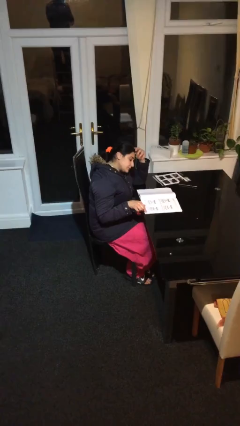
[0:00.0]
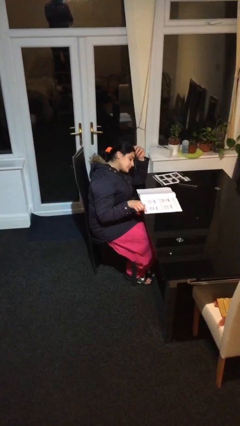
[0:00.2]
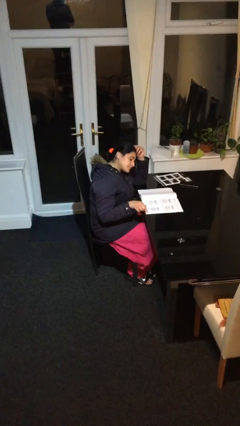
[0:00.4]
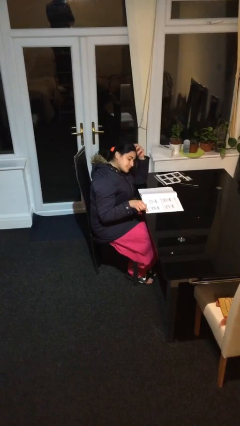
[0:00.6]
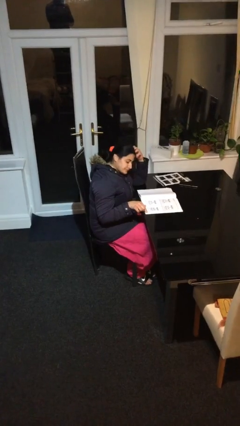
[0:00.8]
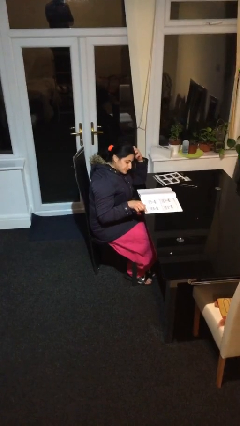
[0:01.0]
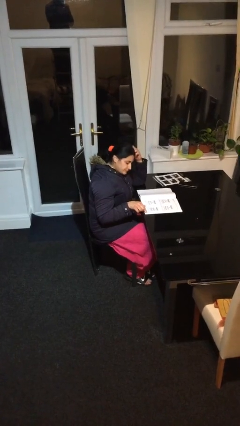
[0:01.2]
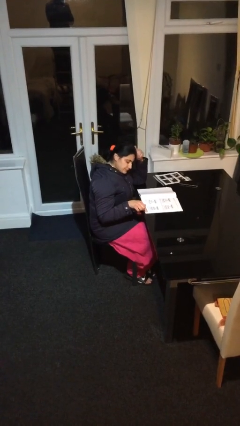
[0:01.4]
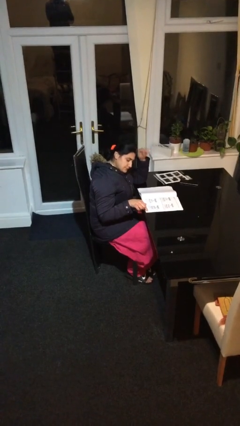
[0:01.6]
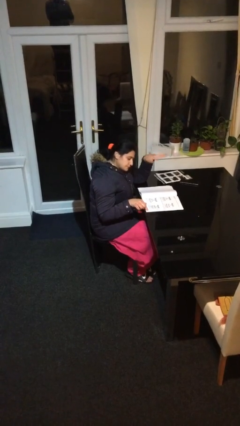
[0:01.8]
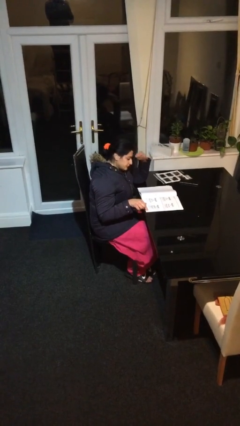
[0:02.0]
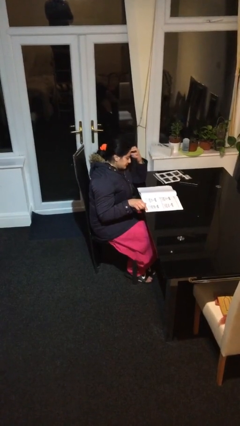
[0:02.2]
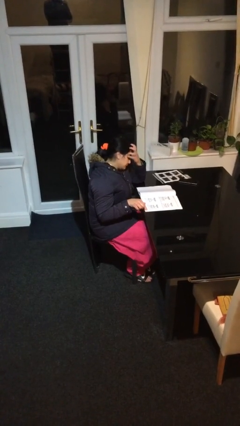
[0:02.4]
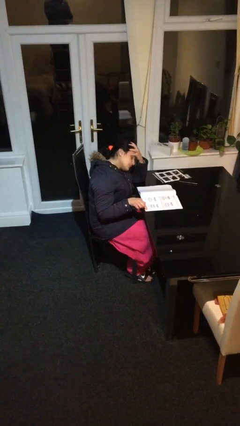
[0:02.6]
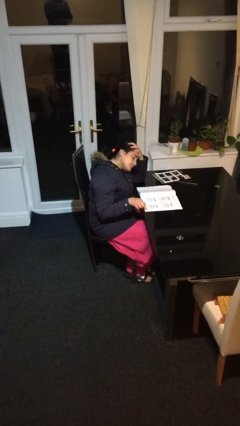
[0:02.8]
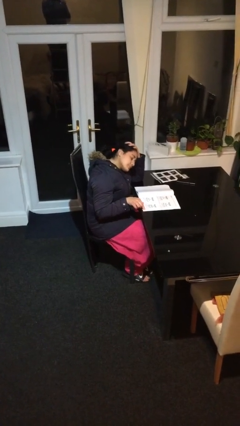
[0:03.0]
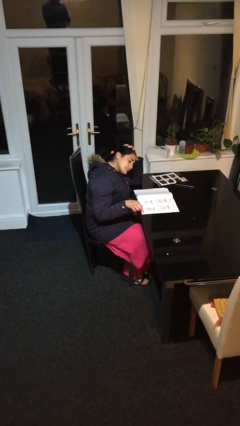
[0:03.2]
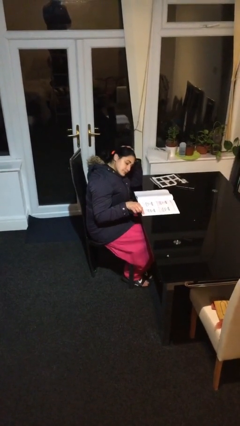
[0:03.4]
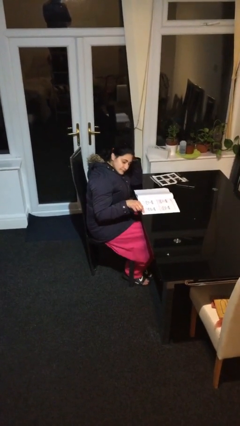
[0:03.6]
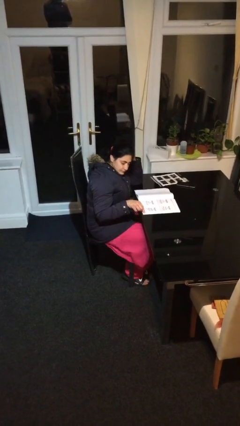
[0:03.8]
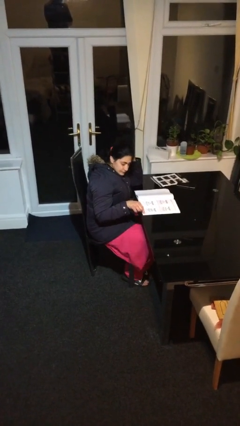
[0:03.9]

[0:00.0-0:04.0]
person reads document

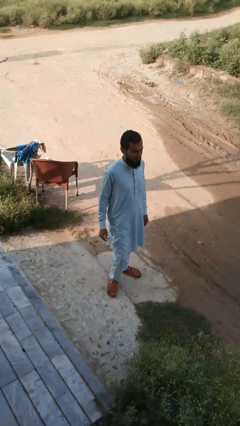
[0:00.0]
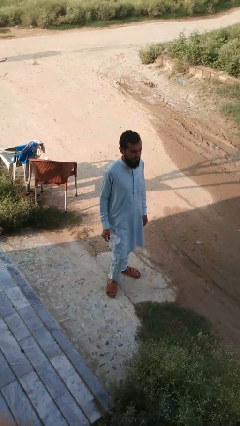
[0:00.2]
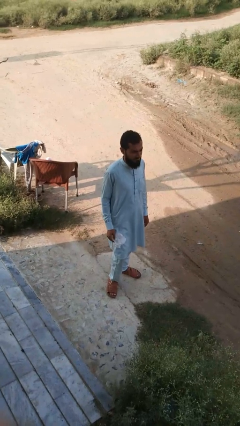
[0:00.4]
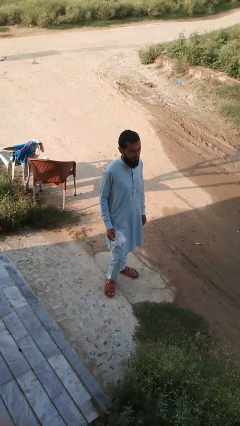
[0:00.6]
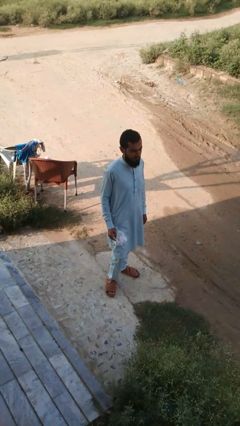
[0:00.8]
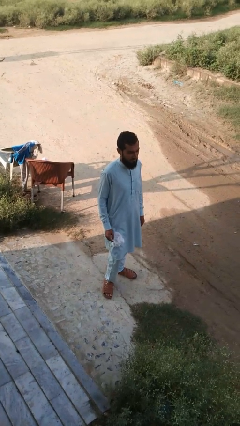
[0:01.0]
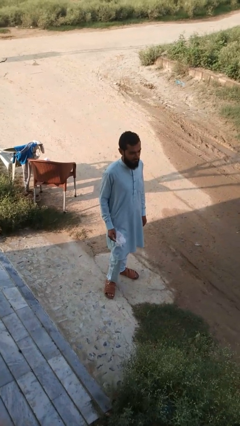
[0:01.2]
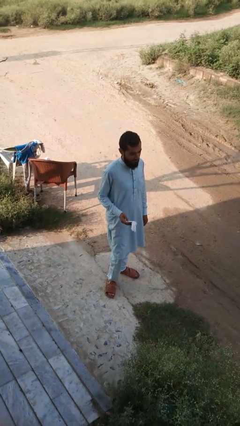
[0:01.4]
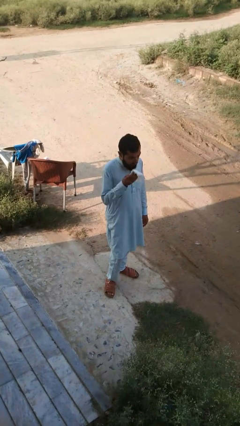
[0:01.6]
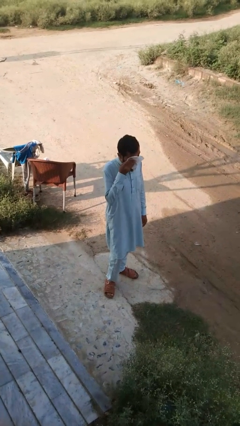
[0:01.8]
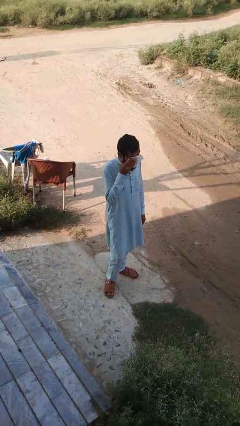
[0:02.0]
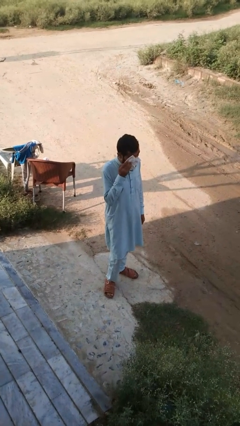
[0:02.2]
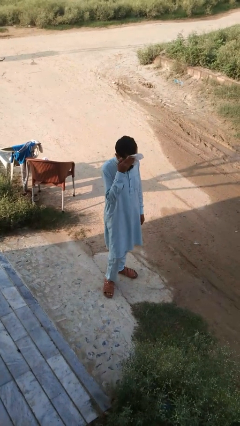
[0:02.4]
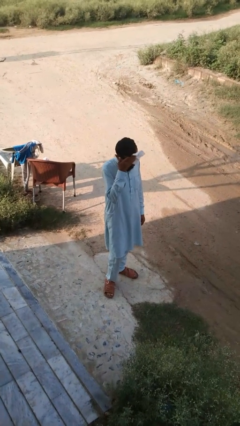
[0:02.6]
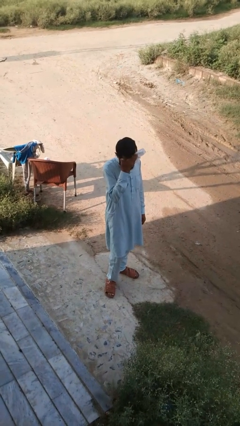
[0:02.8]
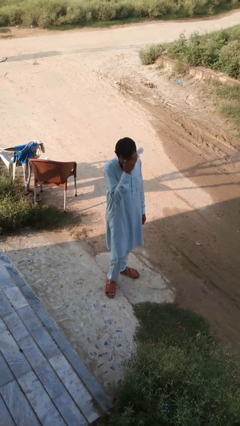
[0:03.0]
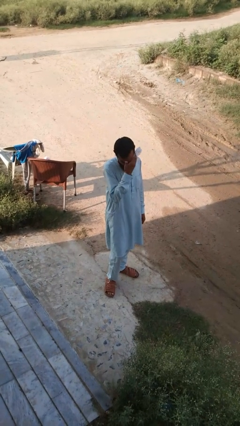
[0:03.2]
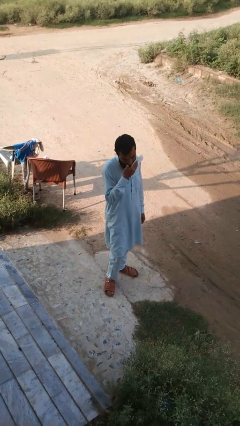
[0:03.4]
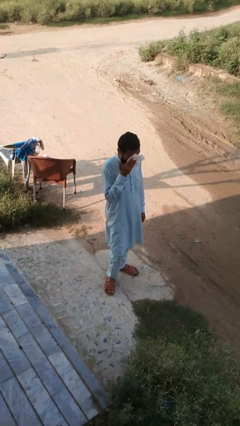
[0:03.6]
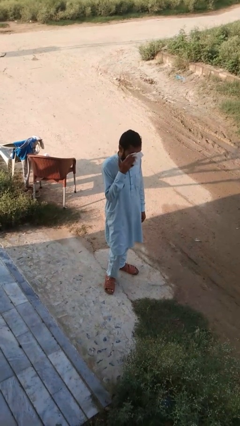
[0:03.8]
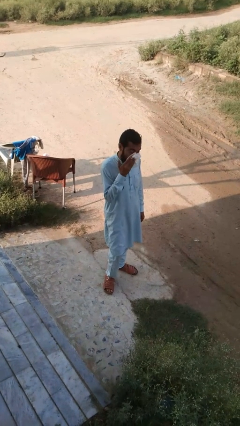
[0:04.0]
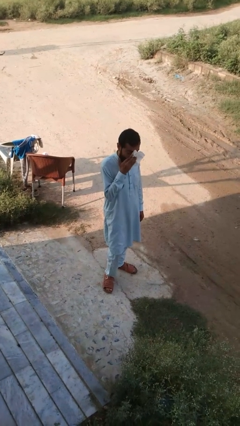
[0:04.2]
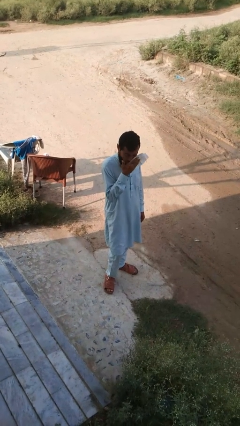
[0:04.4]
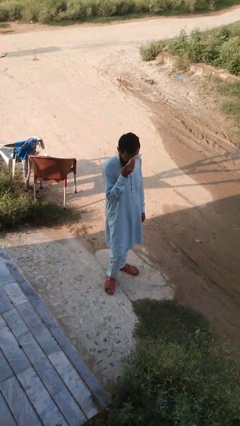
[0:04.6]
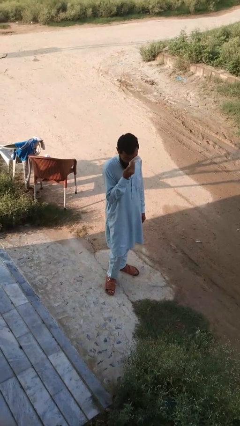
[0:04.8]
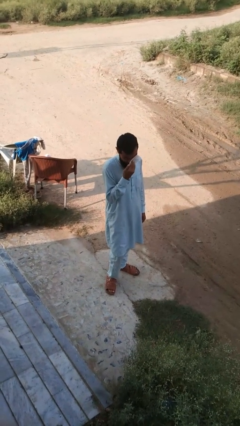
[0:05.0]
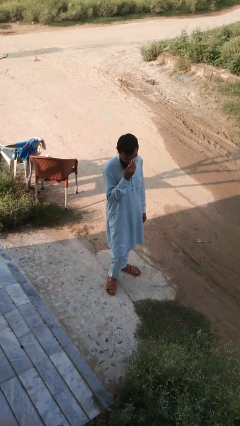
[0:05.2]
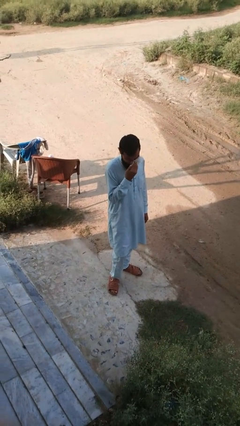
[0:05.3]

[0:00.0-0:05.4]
person wipes mouth with napkin

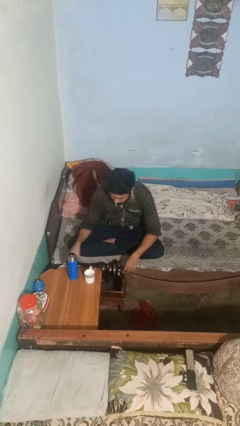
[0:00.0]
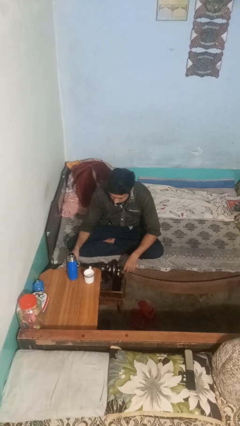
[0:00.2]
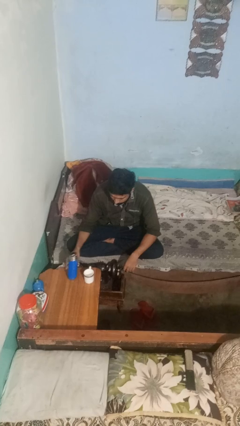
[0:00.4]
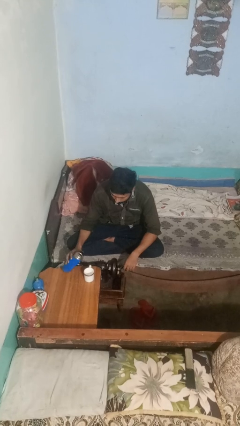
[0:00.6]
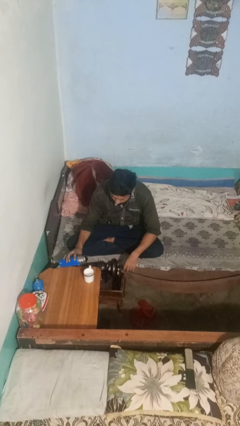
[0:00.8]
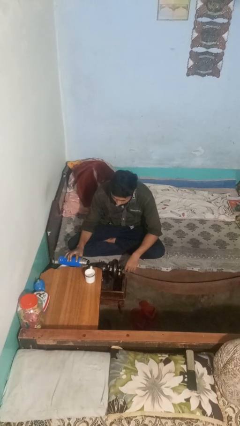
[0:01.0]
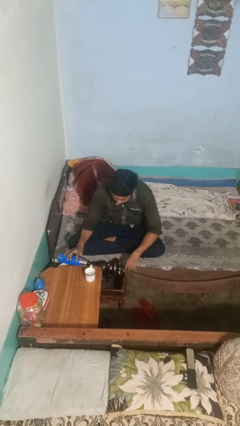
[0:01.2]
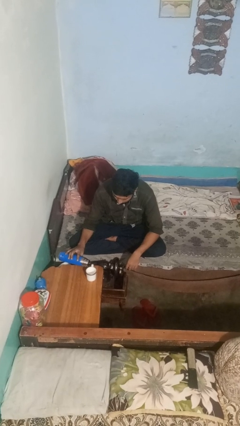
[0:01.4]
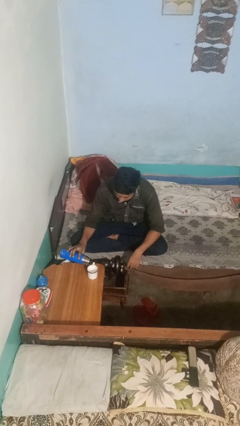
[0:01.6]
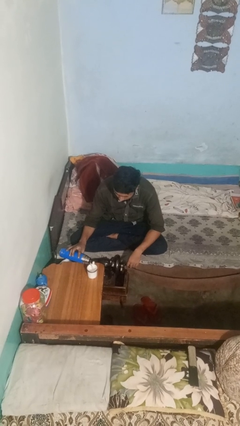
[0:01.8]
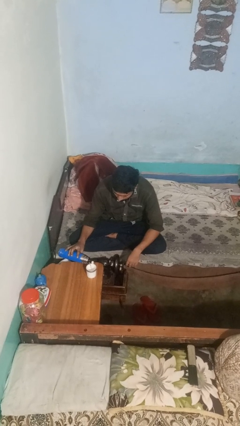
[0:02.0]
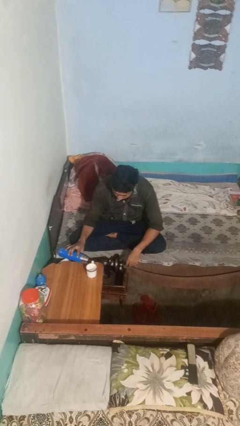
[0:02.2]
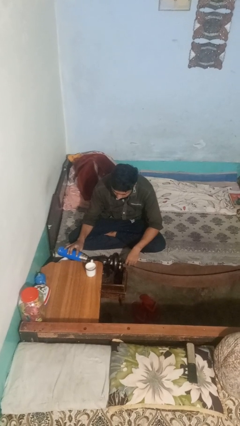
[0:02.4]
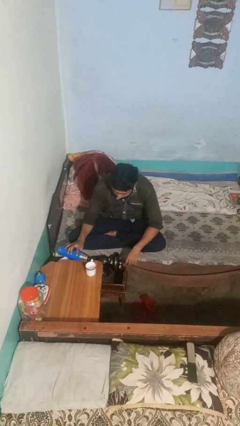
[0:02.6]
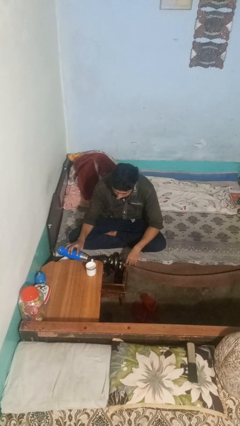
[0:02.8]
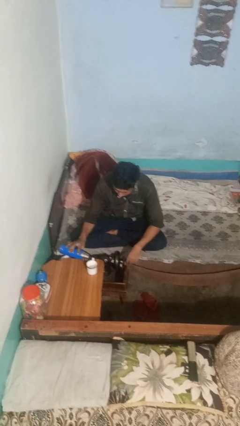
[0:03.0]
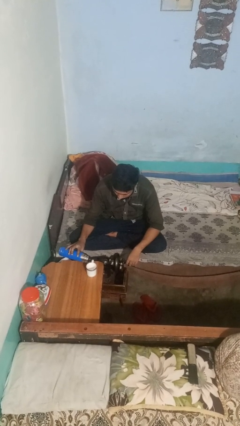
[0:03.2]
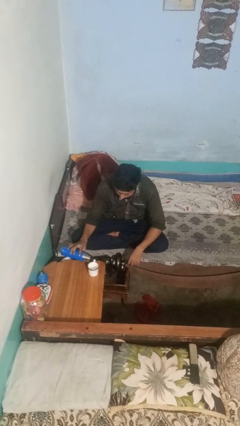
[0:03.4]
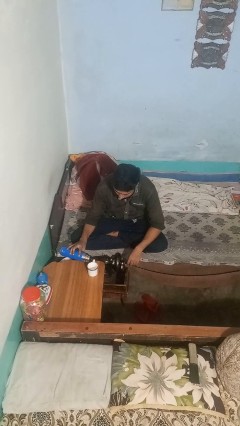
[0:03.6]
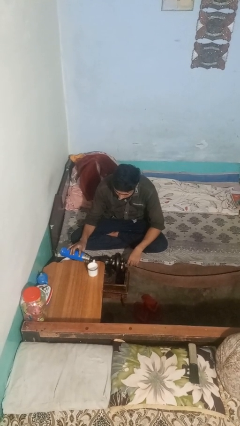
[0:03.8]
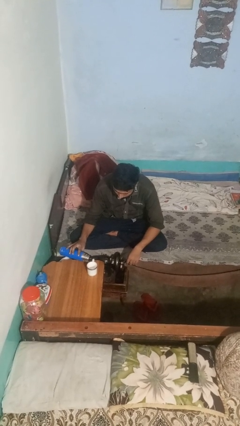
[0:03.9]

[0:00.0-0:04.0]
person pours liquid into cup

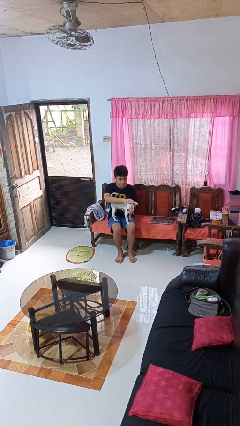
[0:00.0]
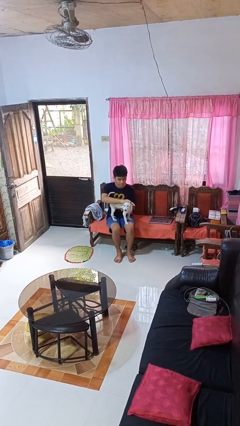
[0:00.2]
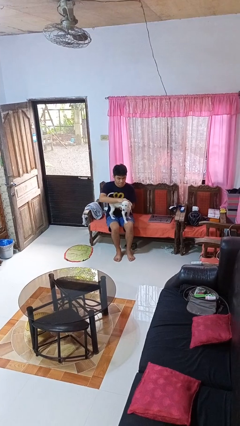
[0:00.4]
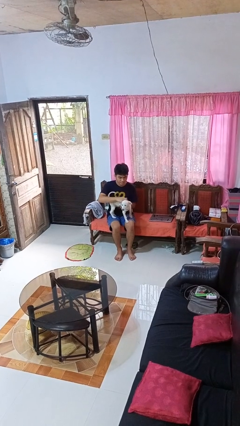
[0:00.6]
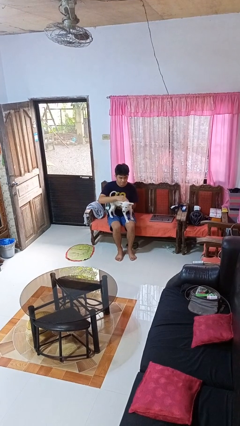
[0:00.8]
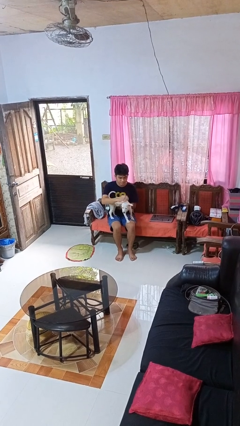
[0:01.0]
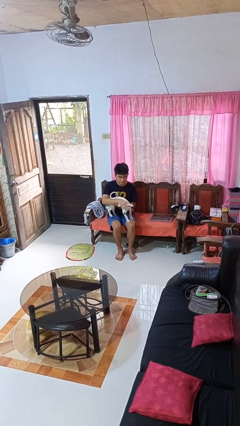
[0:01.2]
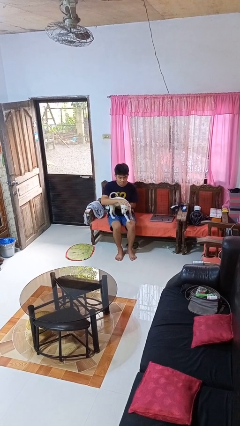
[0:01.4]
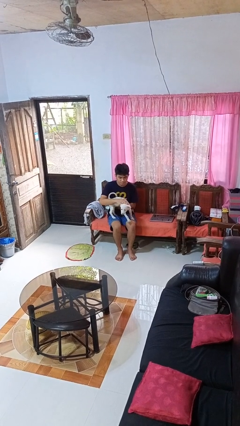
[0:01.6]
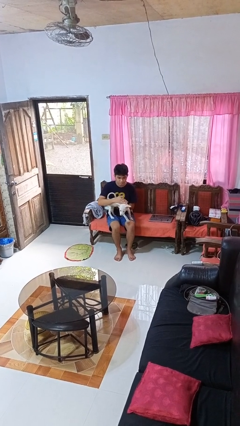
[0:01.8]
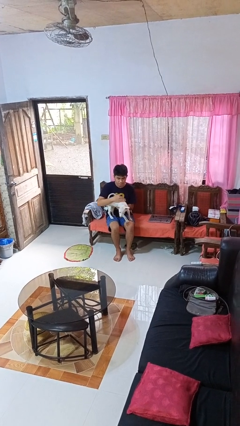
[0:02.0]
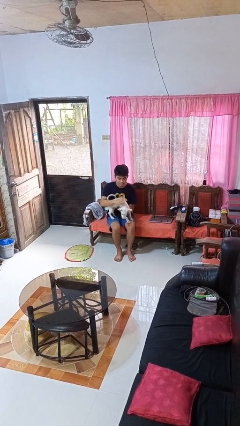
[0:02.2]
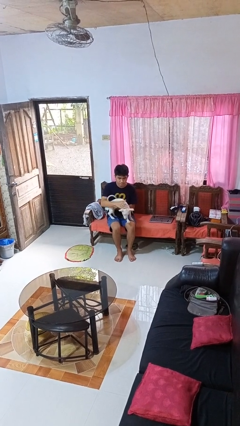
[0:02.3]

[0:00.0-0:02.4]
person pets dog

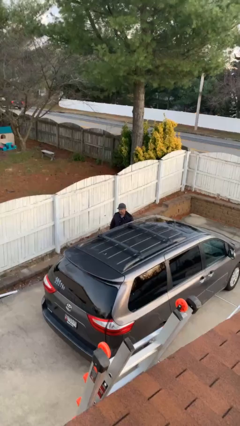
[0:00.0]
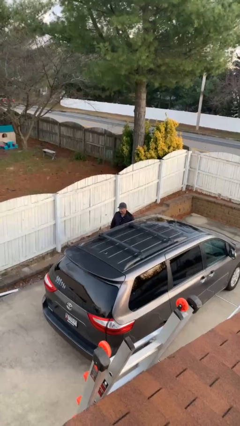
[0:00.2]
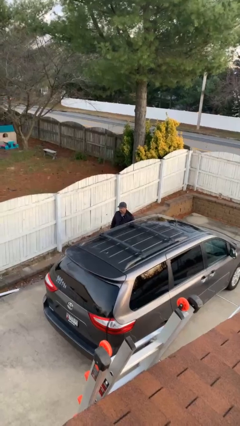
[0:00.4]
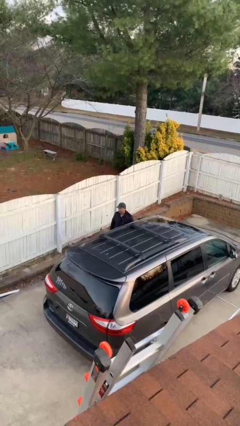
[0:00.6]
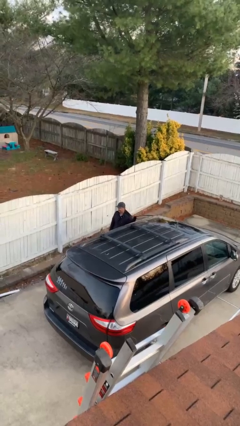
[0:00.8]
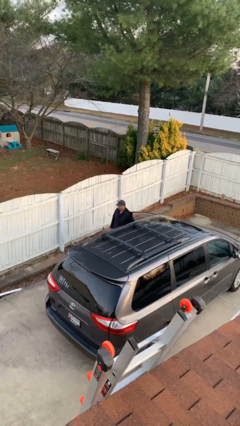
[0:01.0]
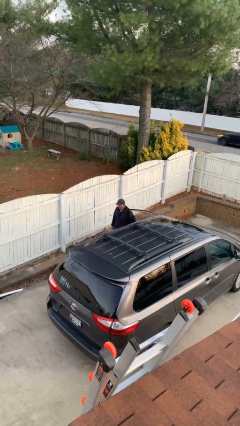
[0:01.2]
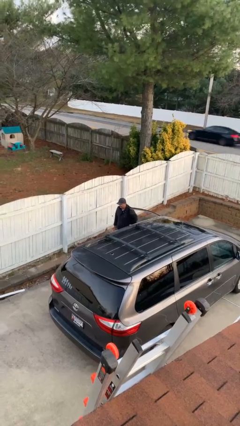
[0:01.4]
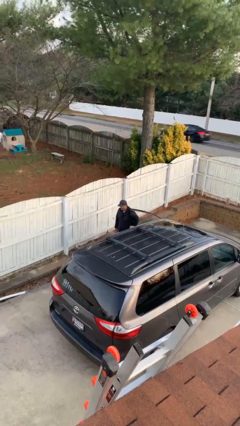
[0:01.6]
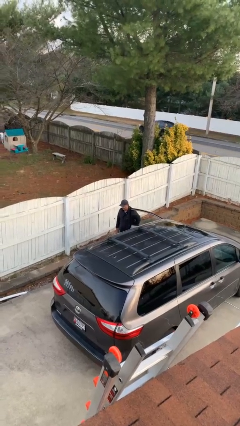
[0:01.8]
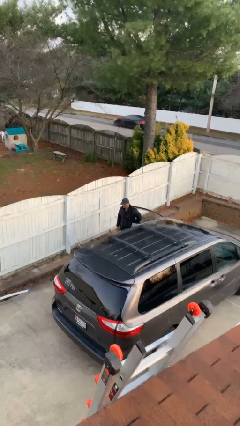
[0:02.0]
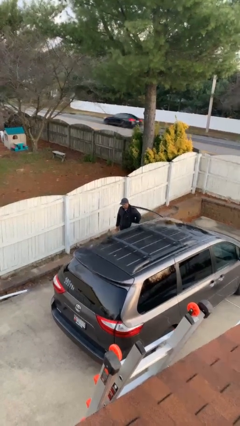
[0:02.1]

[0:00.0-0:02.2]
person opens car door
